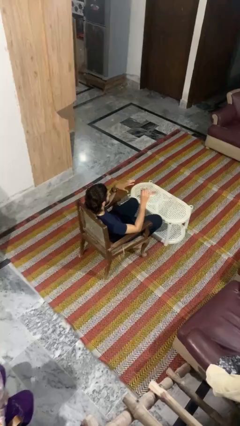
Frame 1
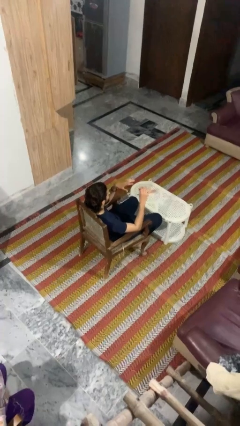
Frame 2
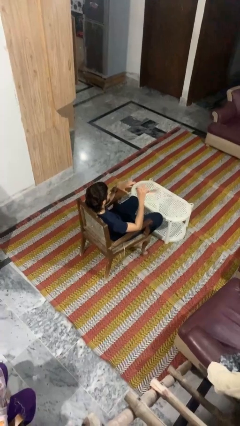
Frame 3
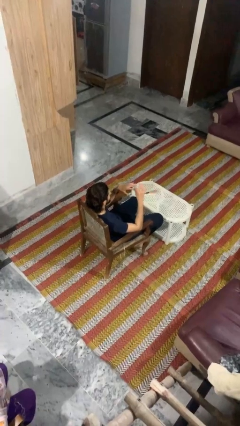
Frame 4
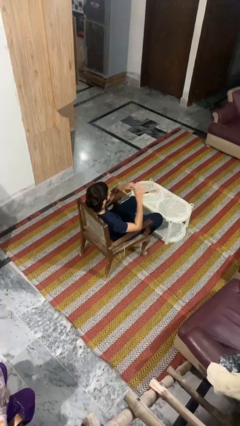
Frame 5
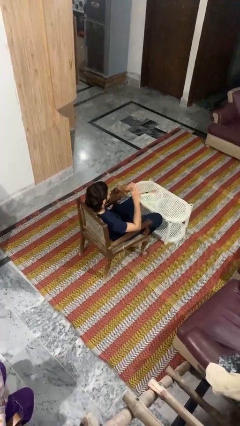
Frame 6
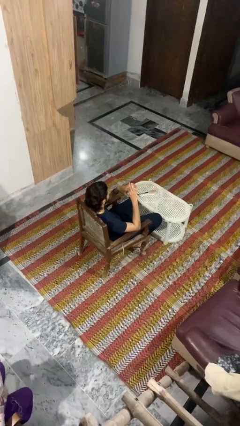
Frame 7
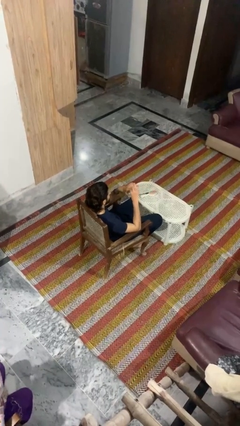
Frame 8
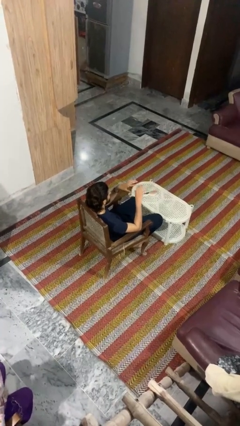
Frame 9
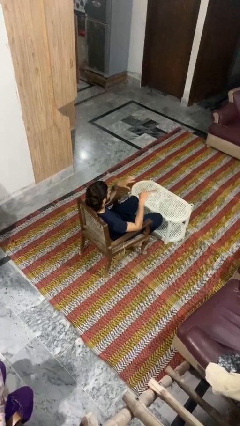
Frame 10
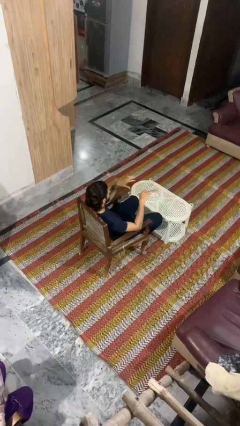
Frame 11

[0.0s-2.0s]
person puts on ring

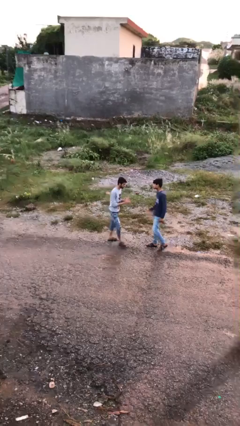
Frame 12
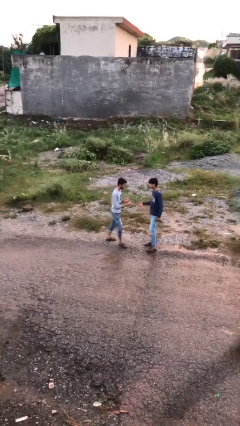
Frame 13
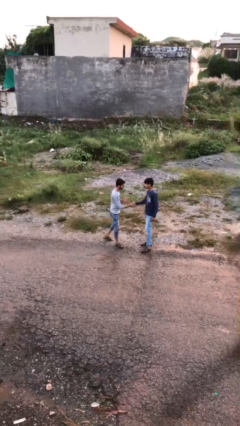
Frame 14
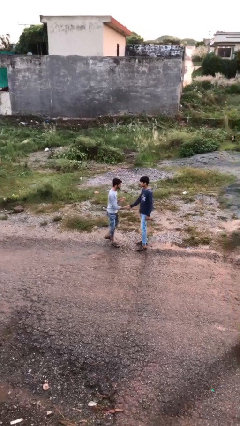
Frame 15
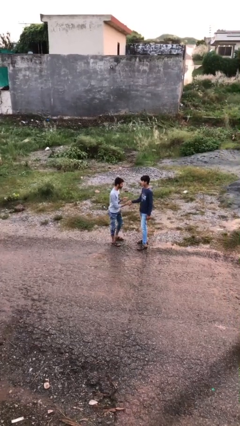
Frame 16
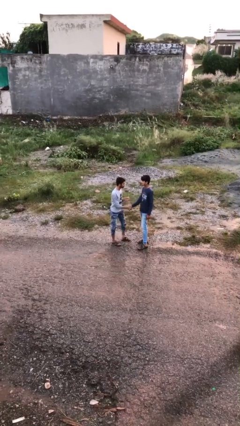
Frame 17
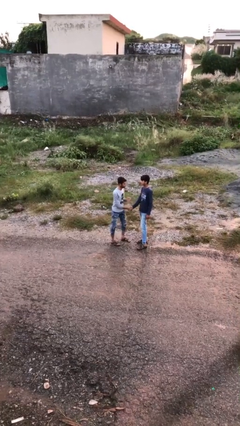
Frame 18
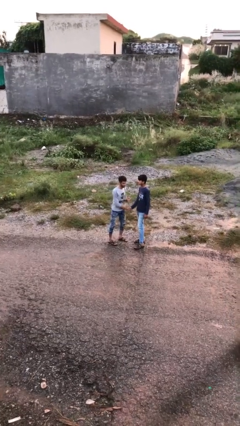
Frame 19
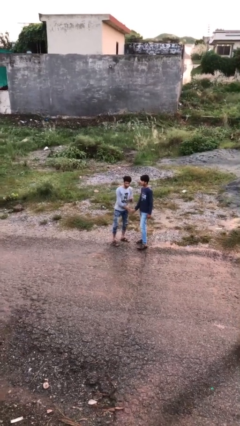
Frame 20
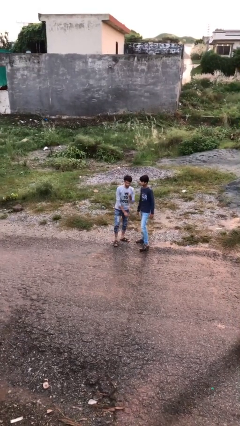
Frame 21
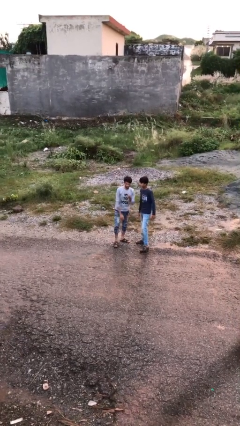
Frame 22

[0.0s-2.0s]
person shakes hand

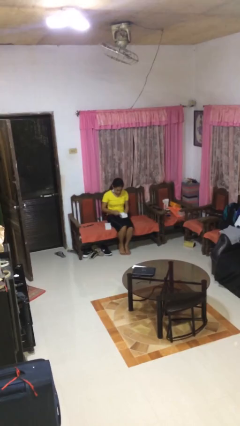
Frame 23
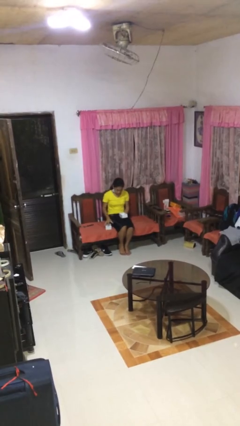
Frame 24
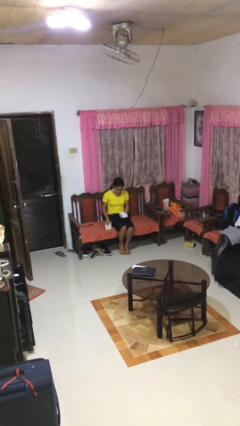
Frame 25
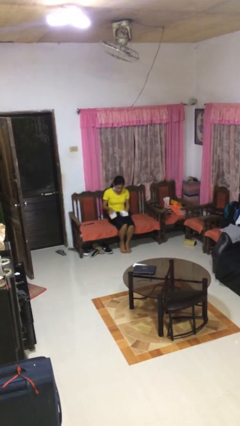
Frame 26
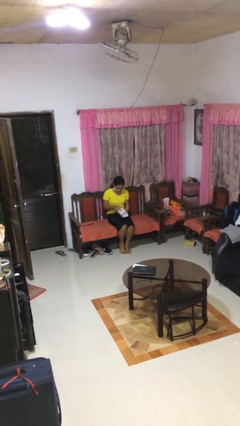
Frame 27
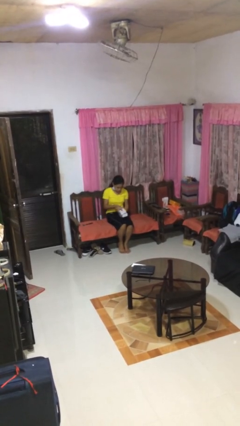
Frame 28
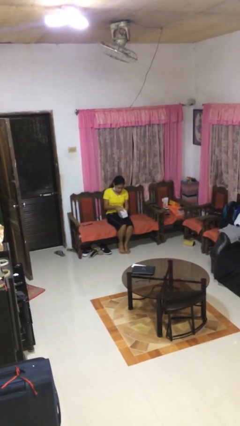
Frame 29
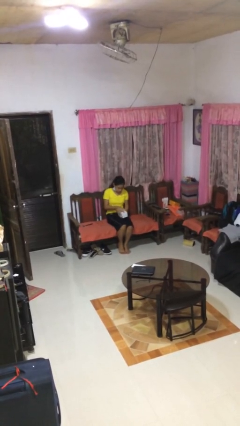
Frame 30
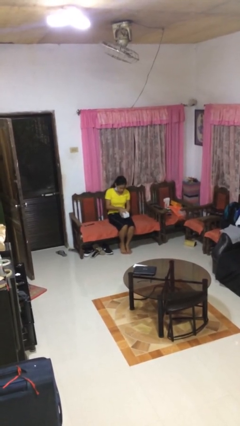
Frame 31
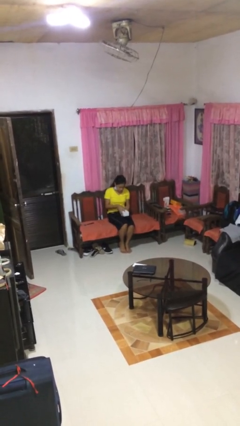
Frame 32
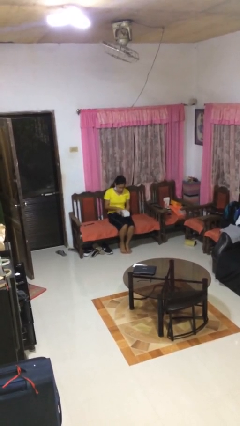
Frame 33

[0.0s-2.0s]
person closes jewelry box

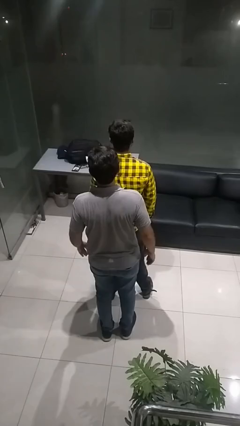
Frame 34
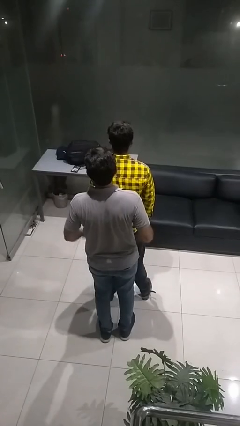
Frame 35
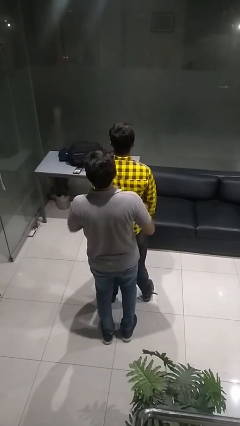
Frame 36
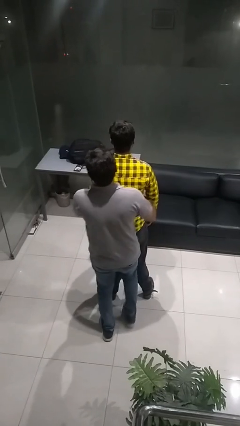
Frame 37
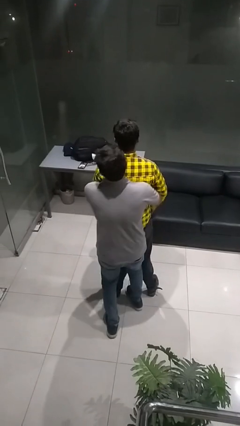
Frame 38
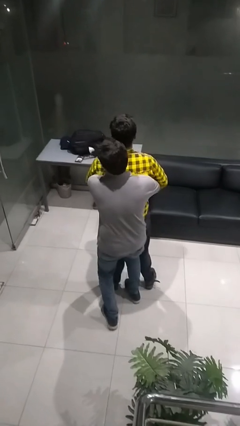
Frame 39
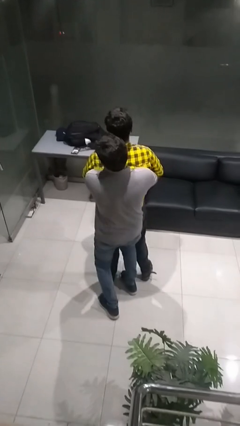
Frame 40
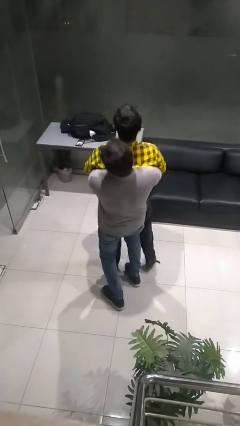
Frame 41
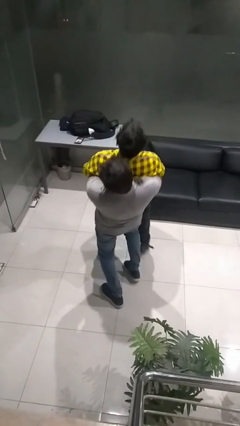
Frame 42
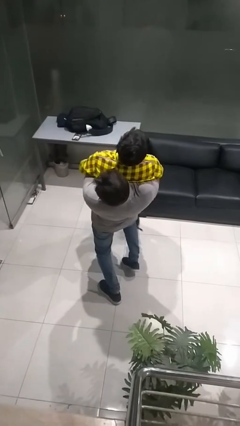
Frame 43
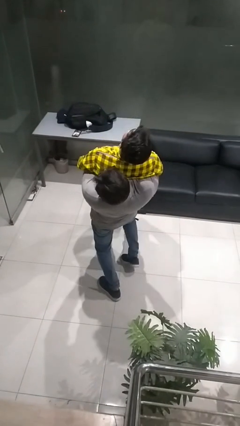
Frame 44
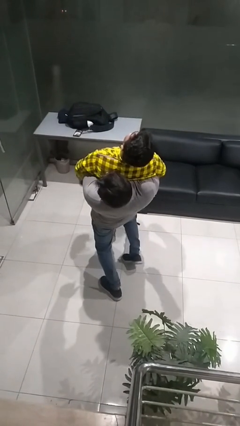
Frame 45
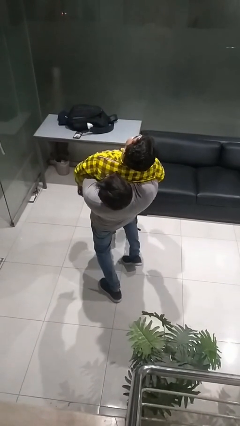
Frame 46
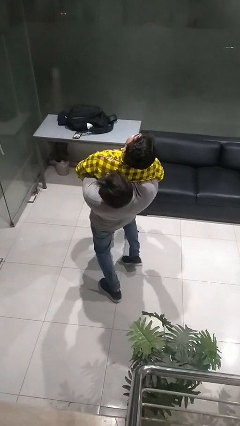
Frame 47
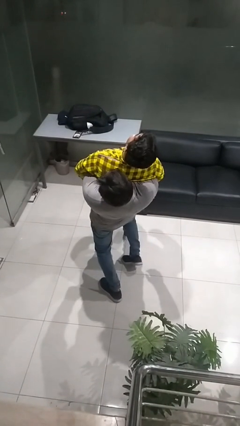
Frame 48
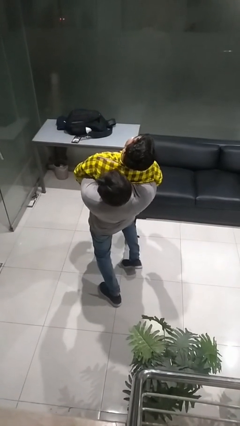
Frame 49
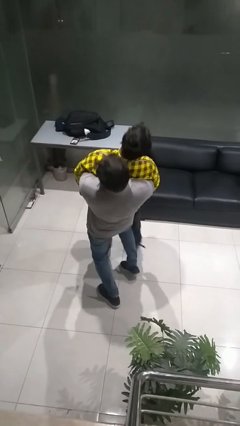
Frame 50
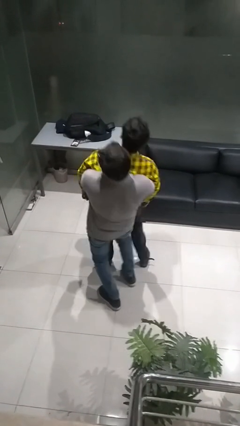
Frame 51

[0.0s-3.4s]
person picks up person

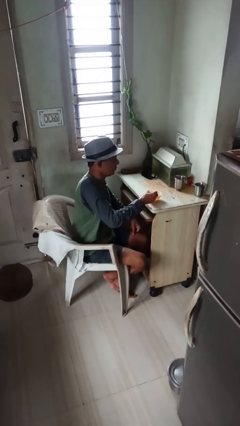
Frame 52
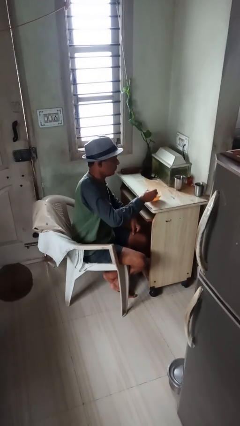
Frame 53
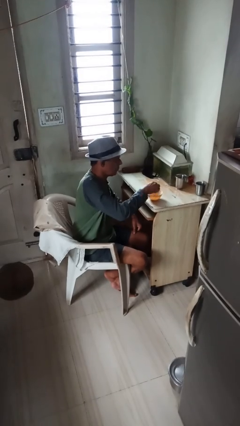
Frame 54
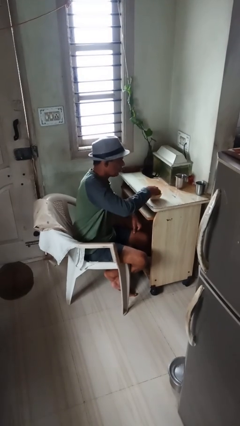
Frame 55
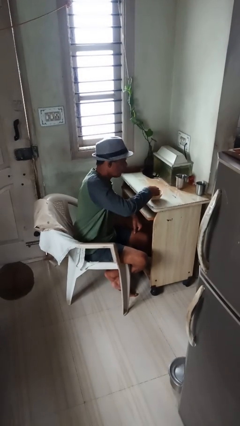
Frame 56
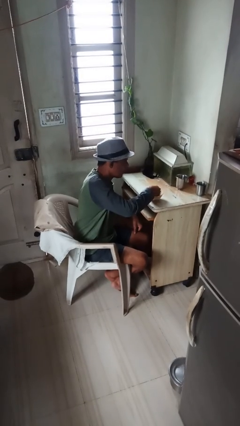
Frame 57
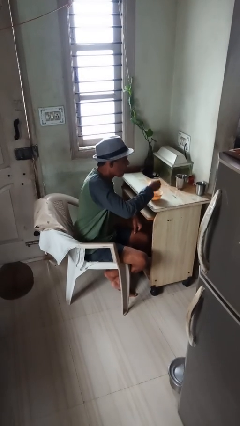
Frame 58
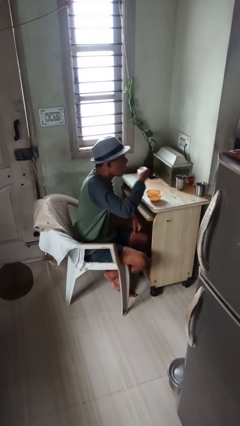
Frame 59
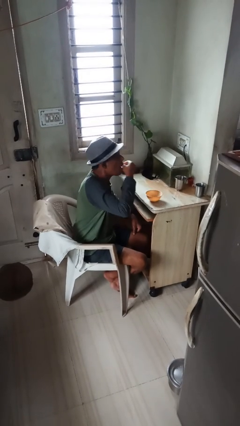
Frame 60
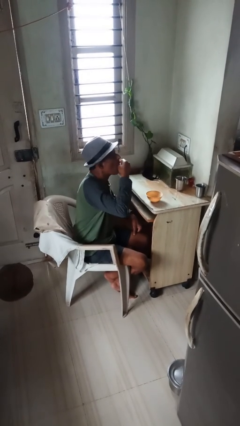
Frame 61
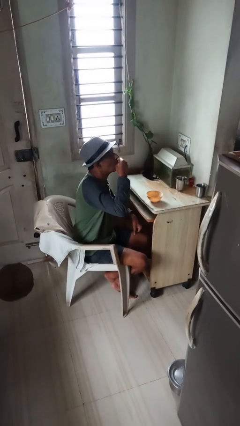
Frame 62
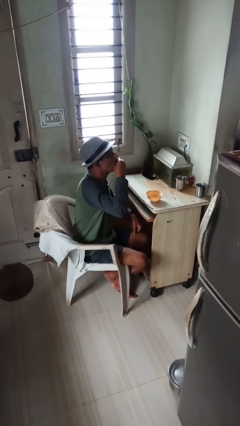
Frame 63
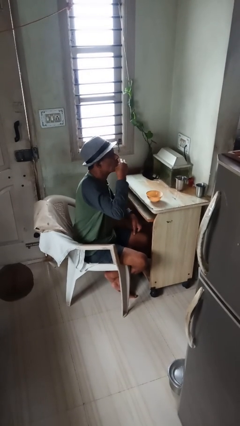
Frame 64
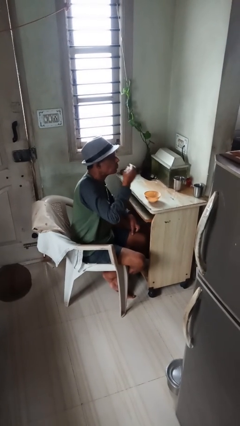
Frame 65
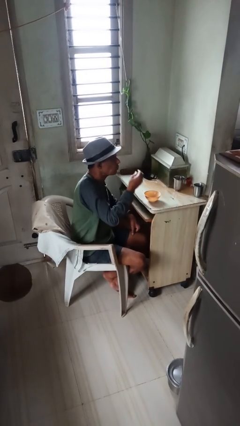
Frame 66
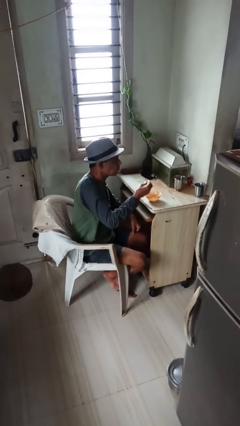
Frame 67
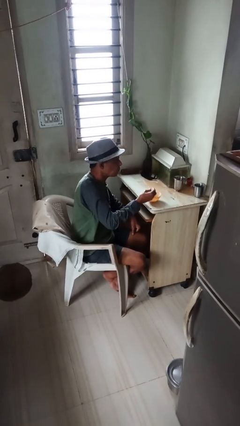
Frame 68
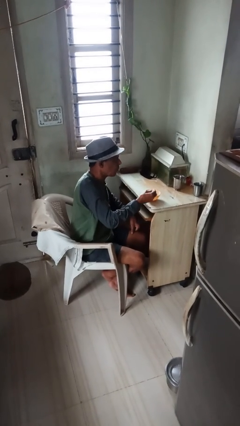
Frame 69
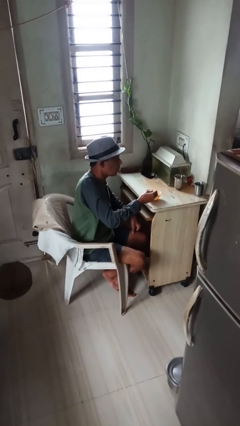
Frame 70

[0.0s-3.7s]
person eats with hands

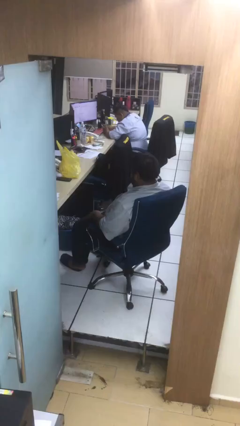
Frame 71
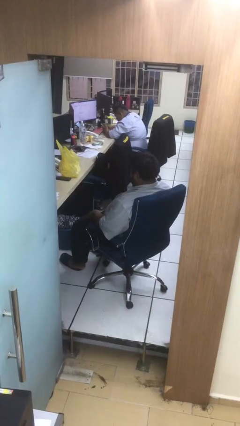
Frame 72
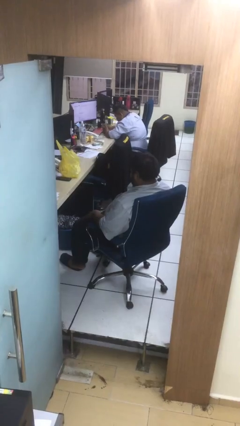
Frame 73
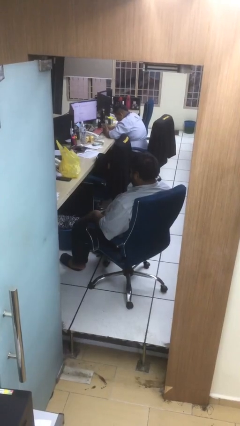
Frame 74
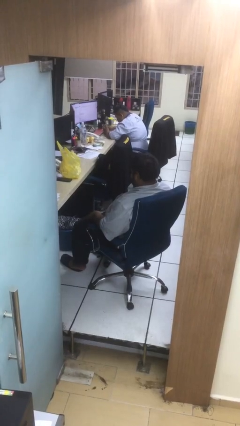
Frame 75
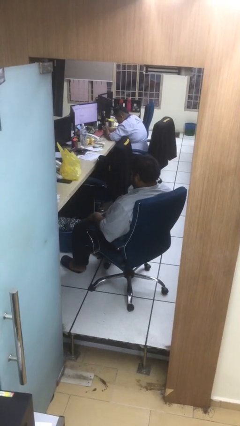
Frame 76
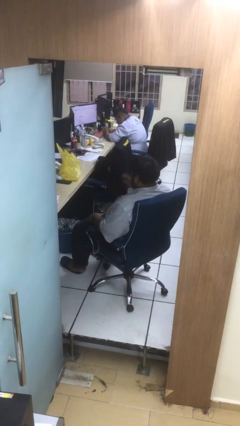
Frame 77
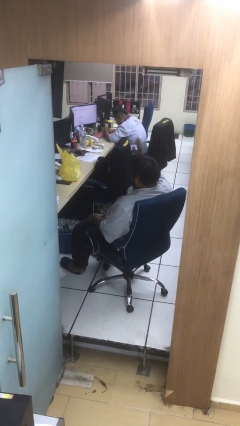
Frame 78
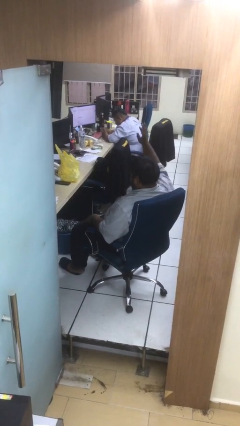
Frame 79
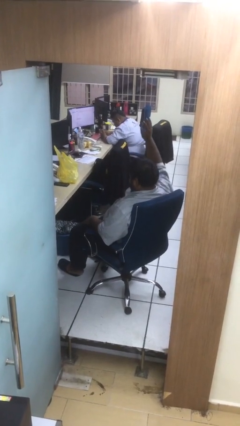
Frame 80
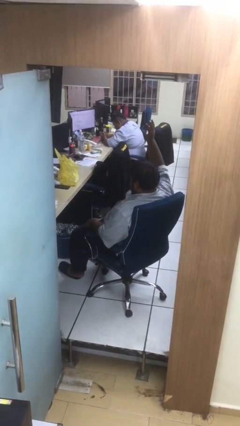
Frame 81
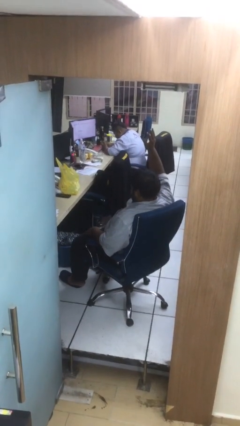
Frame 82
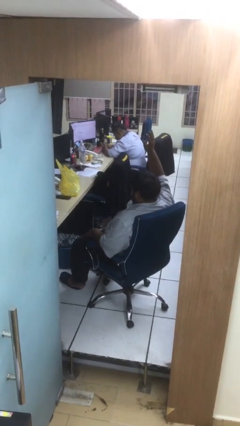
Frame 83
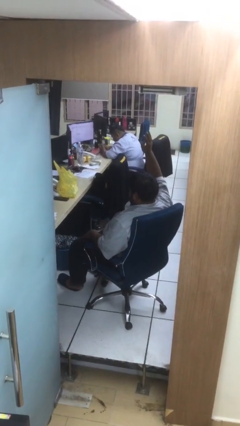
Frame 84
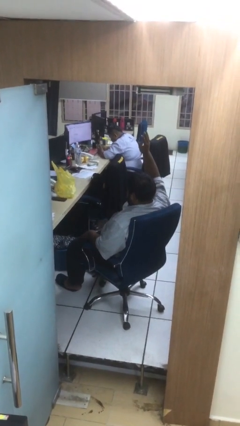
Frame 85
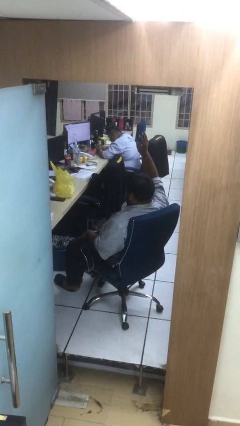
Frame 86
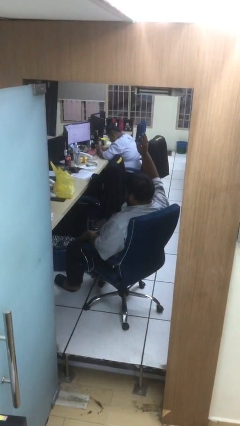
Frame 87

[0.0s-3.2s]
person gestures raise hand

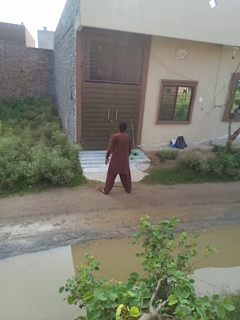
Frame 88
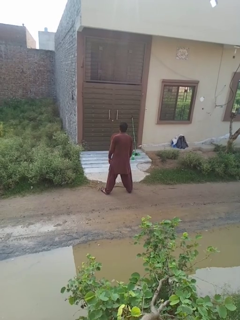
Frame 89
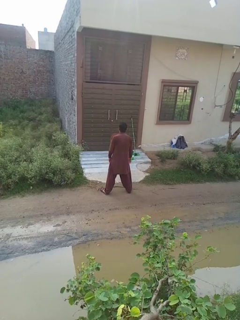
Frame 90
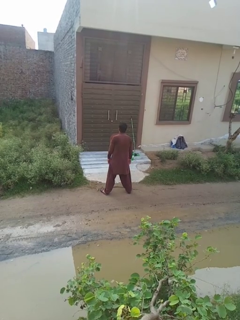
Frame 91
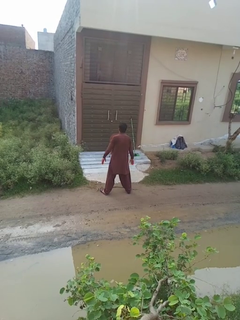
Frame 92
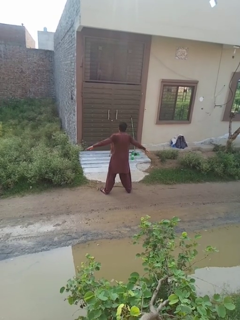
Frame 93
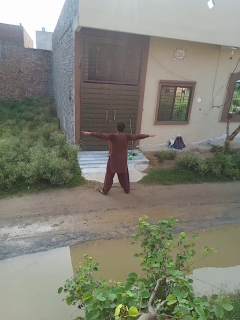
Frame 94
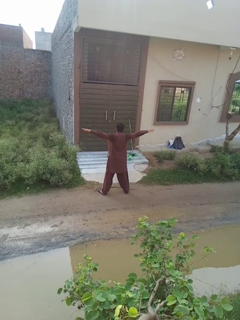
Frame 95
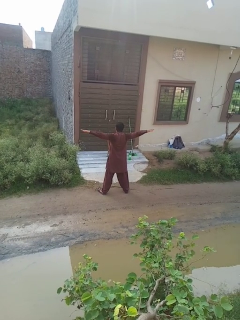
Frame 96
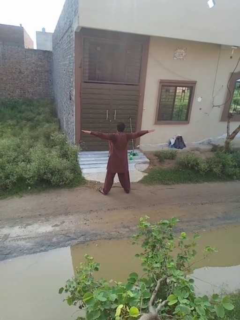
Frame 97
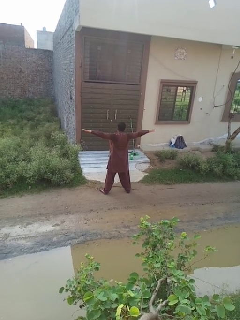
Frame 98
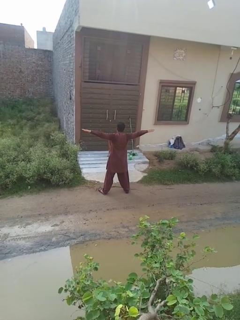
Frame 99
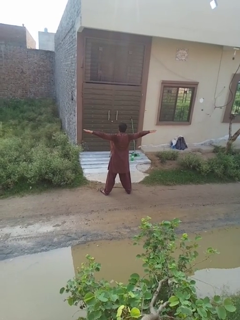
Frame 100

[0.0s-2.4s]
person stretches arms to side
